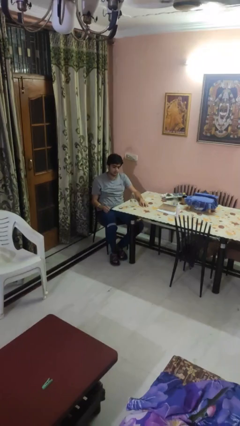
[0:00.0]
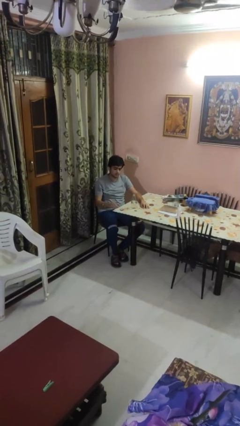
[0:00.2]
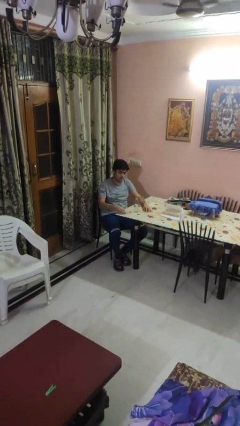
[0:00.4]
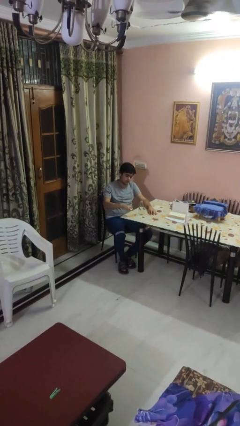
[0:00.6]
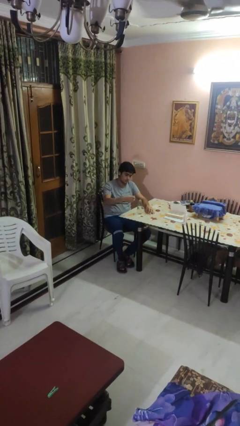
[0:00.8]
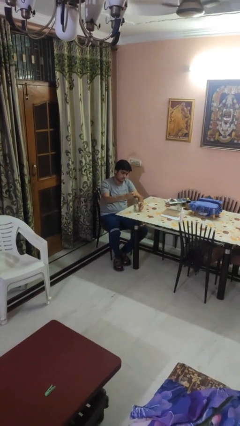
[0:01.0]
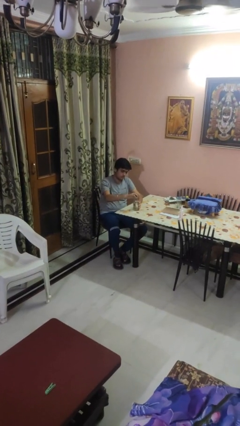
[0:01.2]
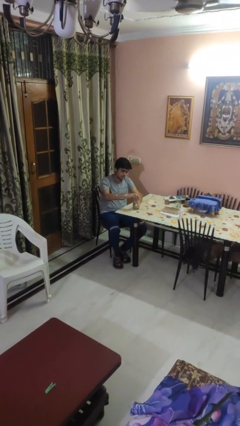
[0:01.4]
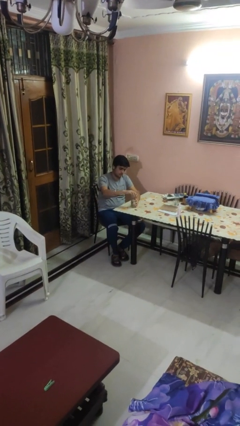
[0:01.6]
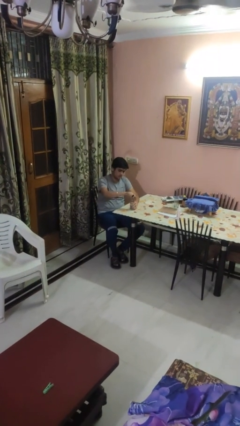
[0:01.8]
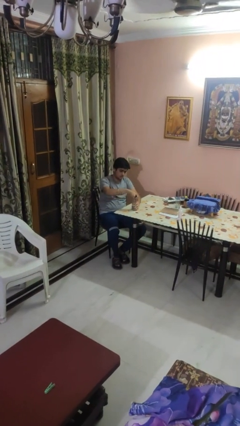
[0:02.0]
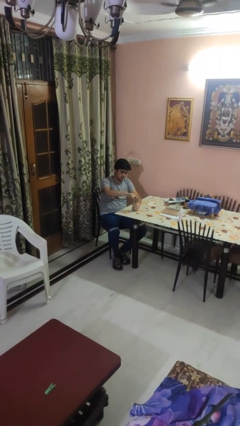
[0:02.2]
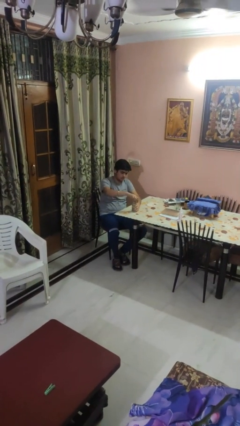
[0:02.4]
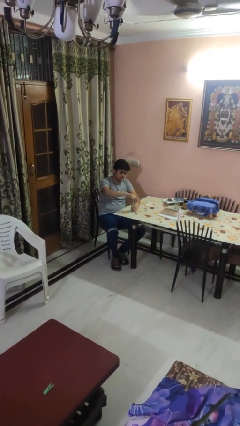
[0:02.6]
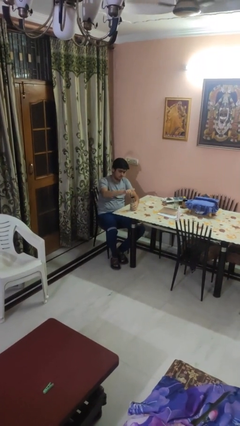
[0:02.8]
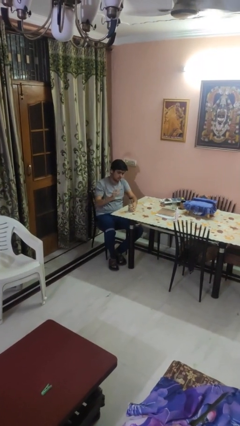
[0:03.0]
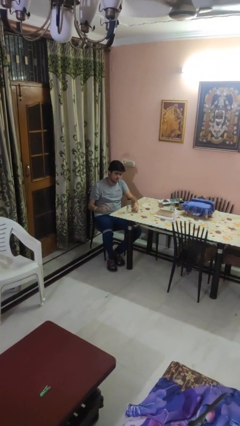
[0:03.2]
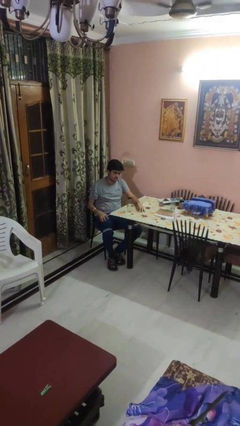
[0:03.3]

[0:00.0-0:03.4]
person screws lid to bottle

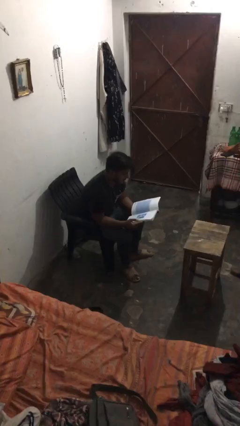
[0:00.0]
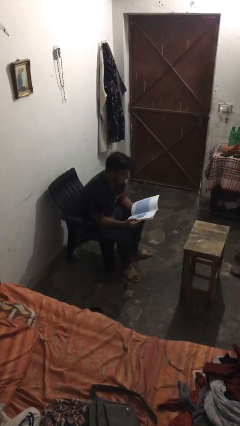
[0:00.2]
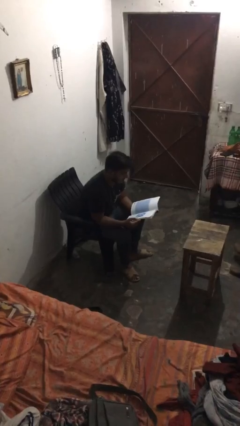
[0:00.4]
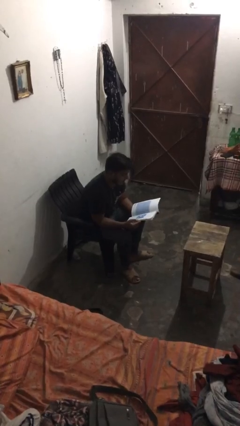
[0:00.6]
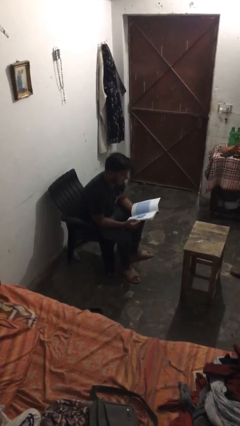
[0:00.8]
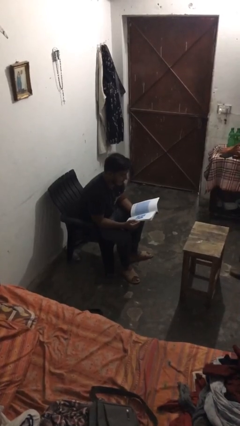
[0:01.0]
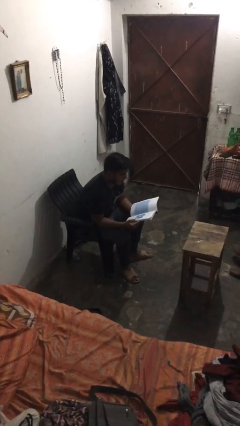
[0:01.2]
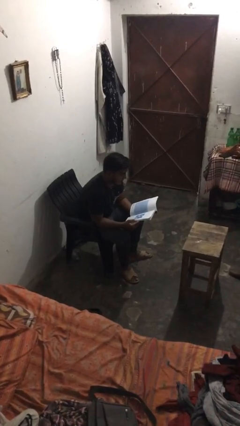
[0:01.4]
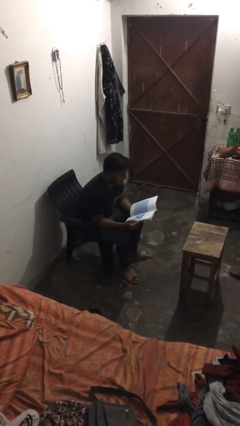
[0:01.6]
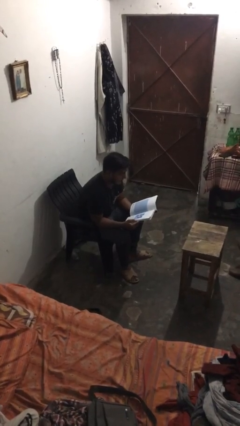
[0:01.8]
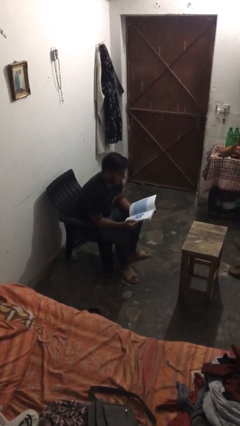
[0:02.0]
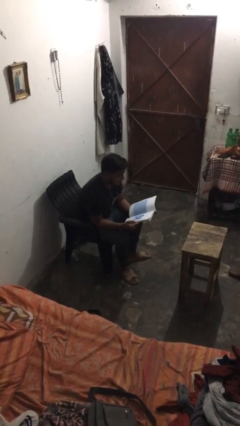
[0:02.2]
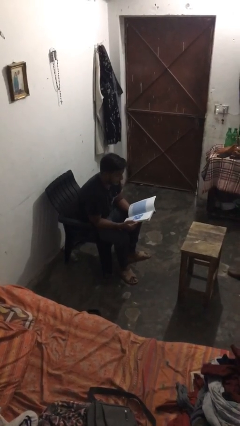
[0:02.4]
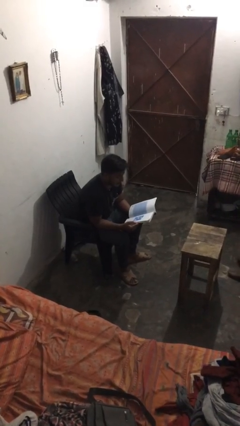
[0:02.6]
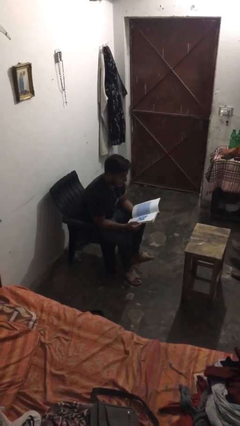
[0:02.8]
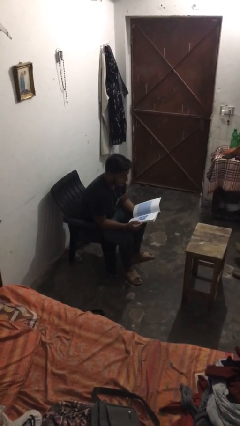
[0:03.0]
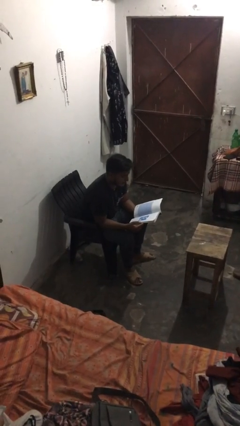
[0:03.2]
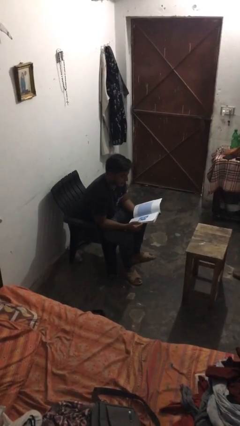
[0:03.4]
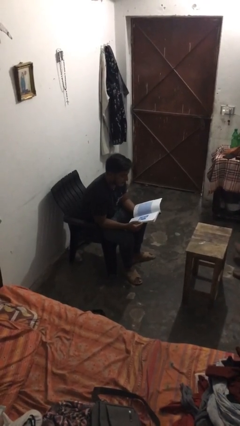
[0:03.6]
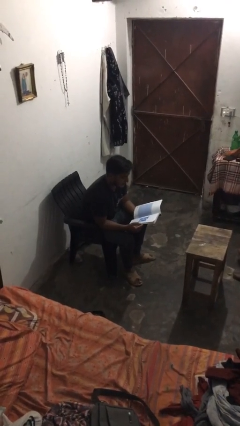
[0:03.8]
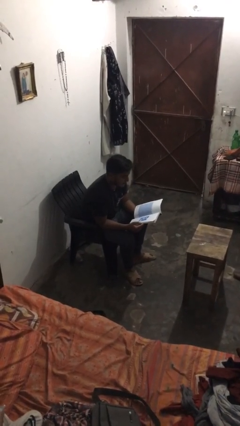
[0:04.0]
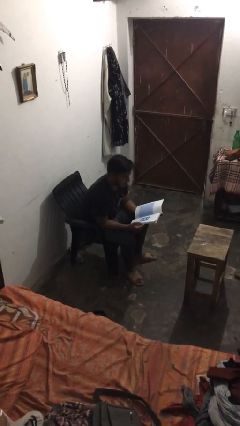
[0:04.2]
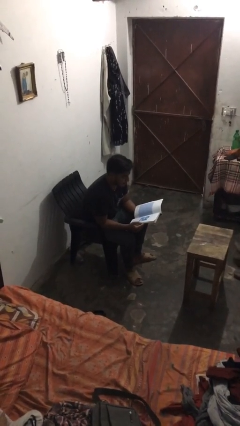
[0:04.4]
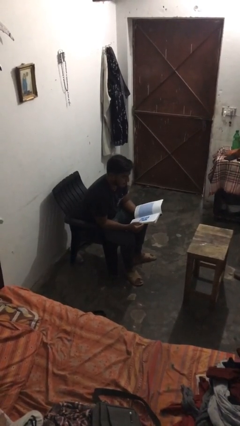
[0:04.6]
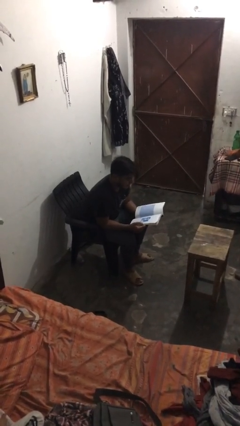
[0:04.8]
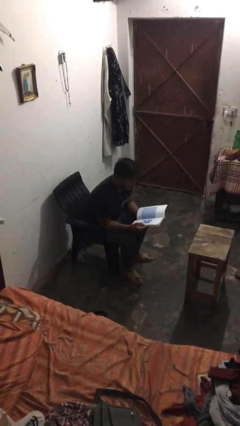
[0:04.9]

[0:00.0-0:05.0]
person reads document

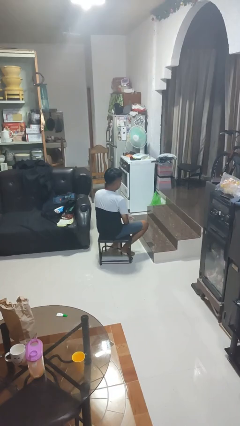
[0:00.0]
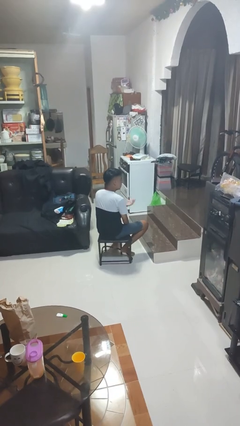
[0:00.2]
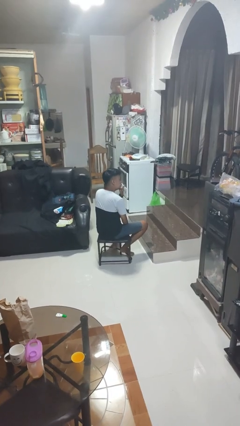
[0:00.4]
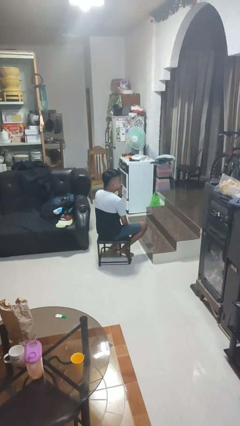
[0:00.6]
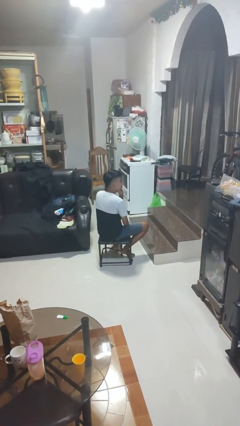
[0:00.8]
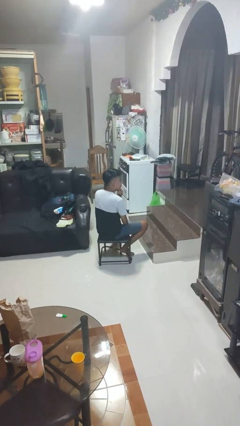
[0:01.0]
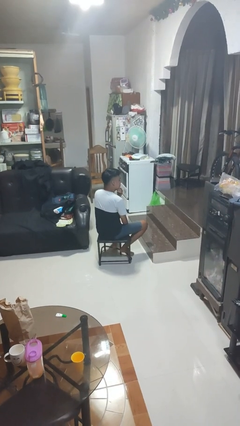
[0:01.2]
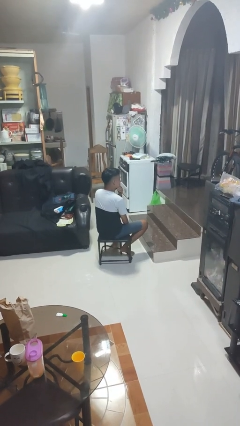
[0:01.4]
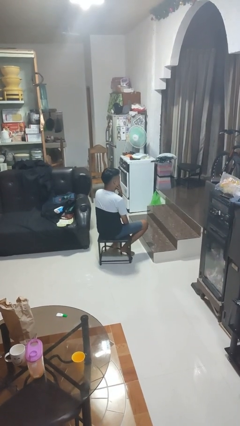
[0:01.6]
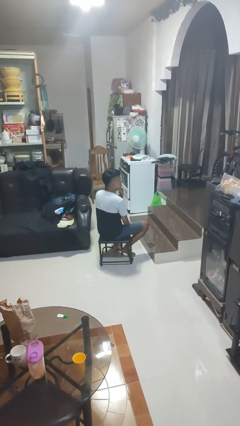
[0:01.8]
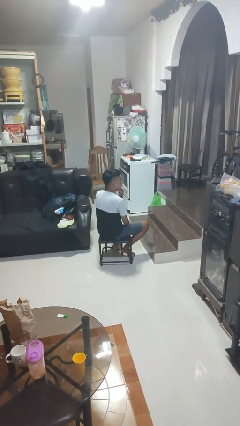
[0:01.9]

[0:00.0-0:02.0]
person strokes chin

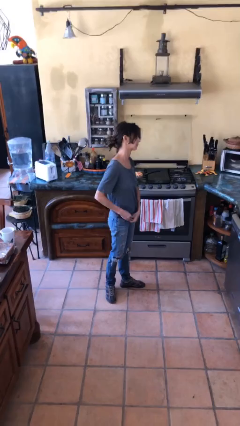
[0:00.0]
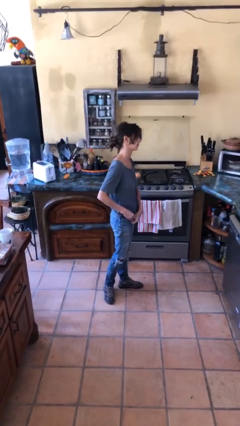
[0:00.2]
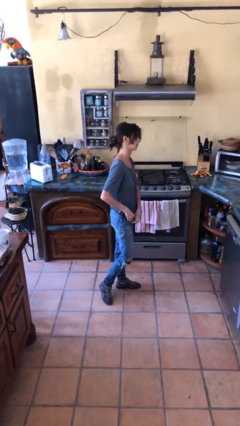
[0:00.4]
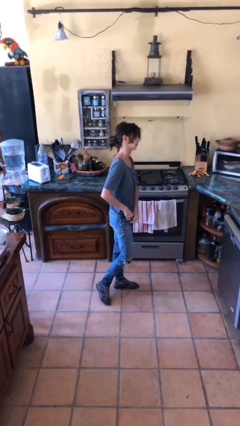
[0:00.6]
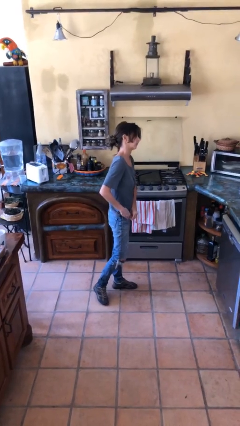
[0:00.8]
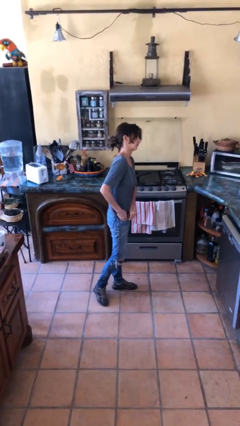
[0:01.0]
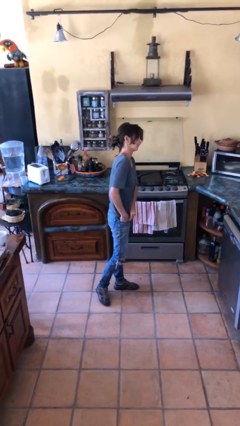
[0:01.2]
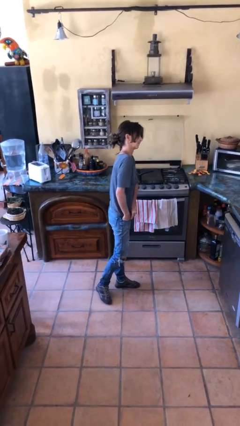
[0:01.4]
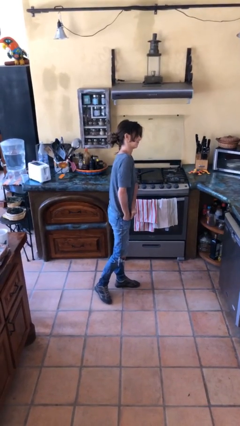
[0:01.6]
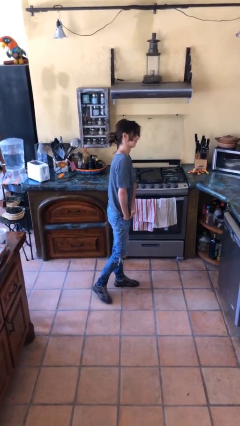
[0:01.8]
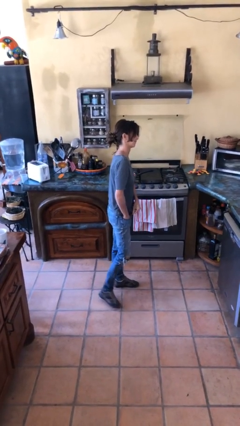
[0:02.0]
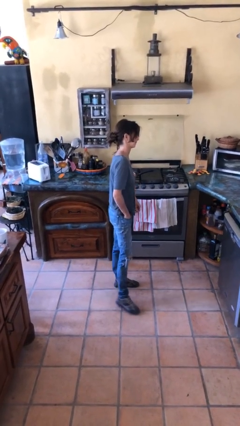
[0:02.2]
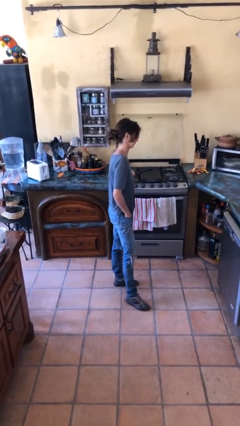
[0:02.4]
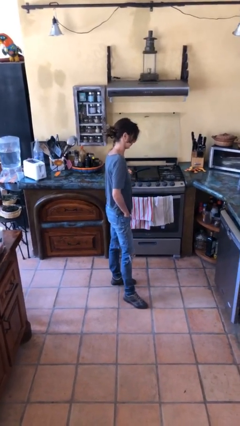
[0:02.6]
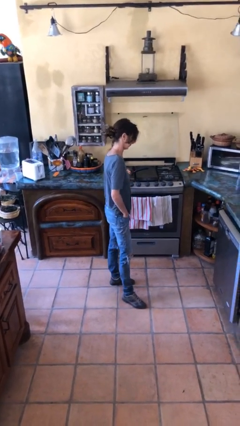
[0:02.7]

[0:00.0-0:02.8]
person puts hands in back pockets

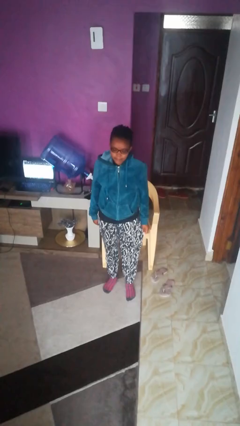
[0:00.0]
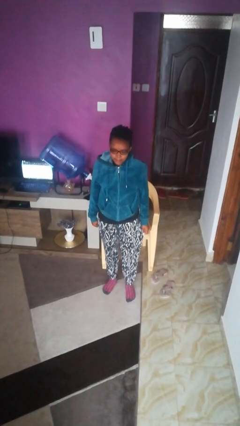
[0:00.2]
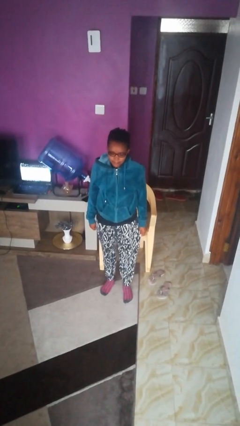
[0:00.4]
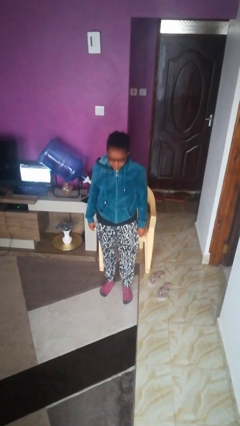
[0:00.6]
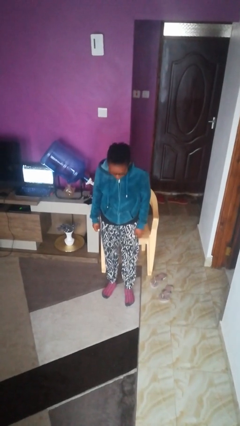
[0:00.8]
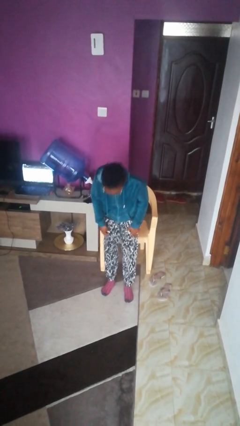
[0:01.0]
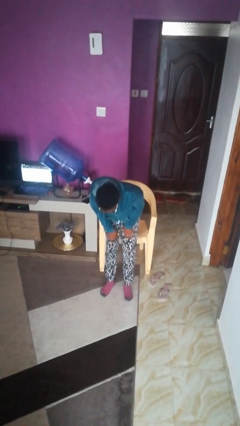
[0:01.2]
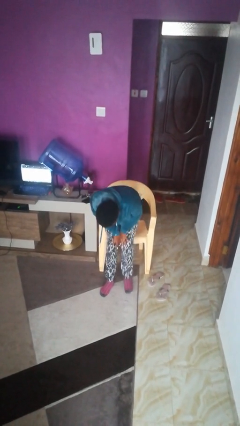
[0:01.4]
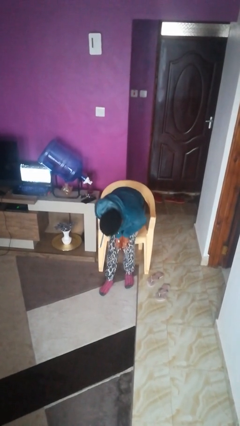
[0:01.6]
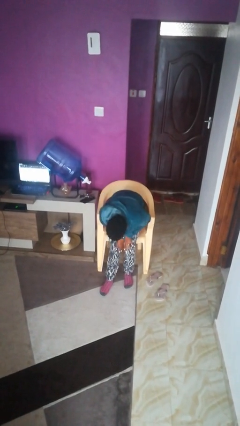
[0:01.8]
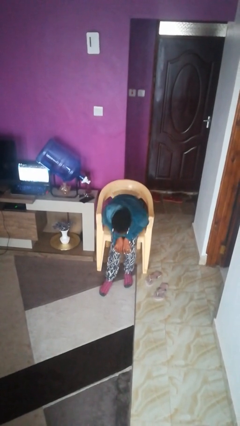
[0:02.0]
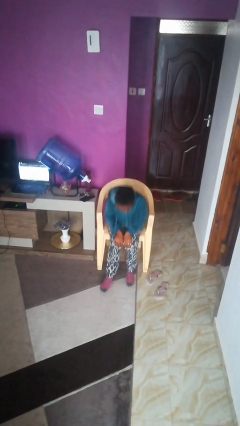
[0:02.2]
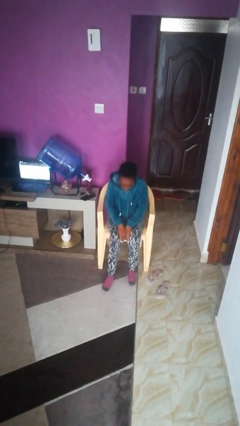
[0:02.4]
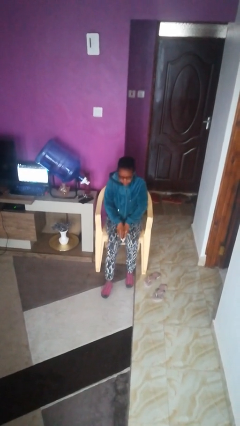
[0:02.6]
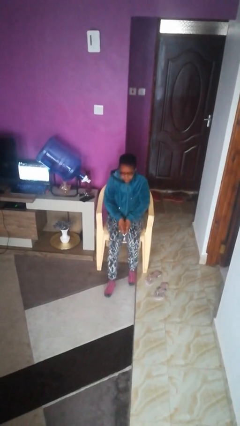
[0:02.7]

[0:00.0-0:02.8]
person sits down

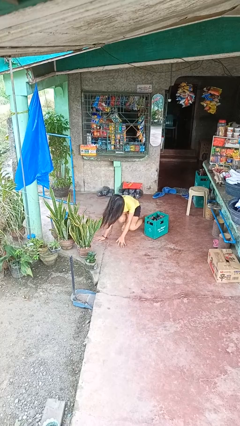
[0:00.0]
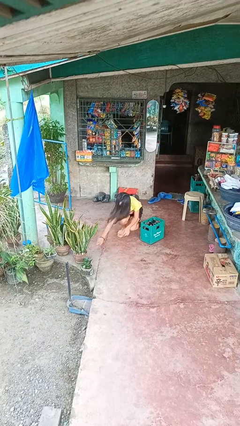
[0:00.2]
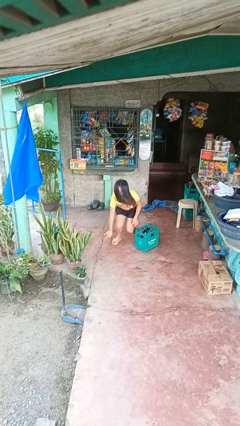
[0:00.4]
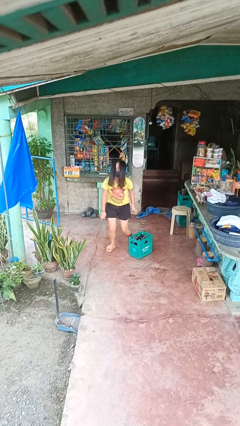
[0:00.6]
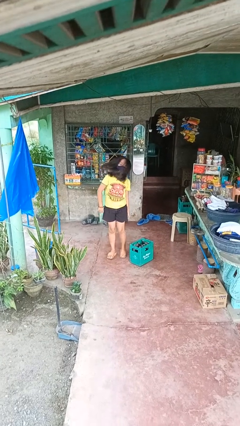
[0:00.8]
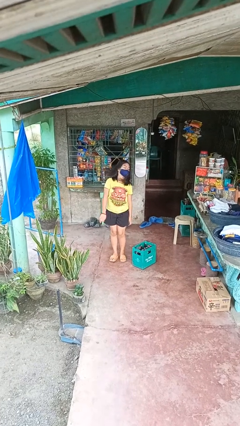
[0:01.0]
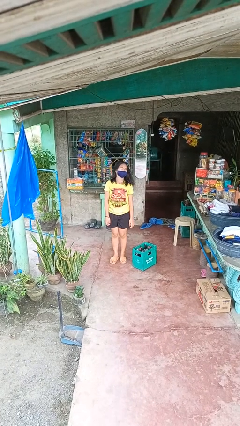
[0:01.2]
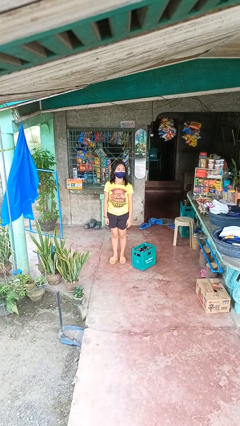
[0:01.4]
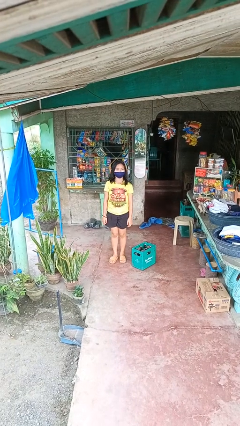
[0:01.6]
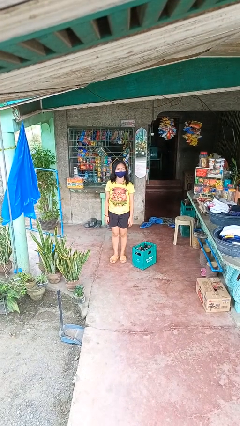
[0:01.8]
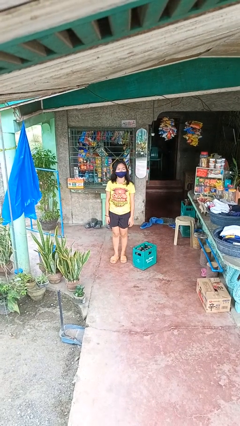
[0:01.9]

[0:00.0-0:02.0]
person stands up from floor
